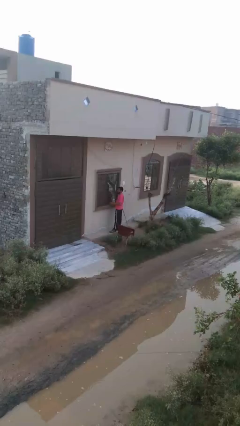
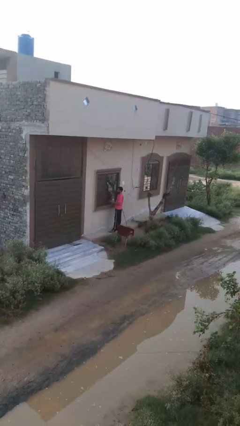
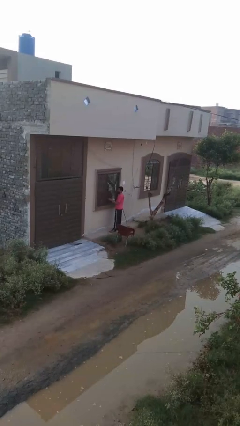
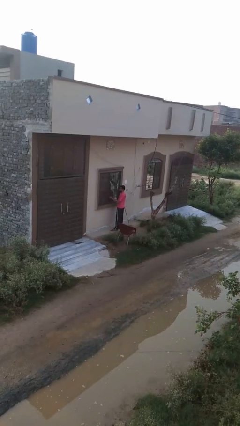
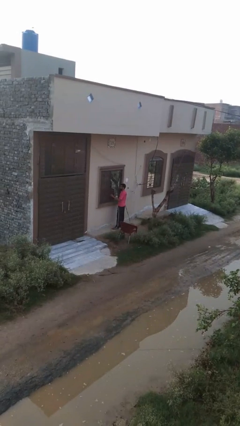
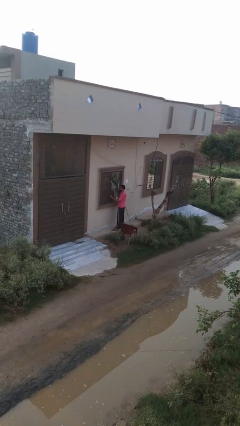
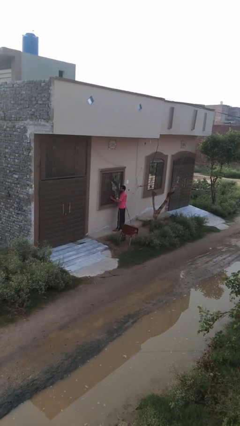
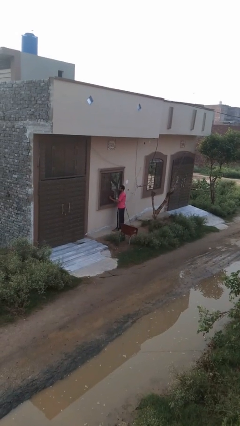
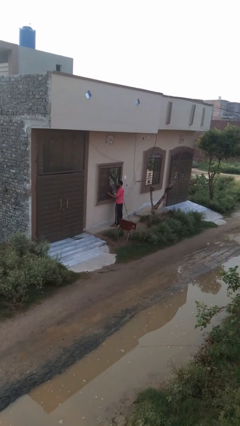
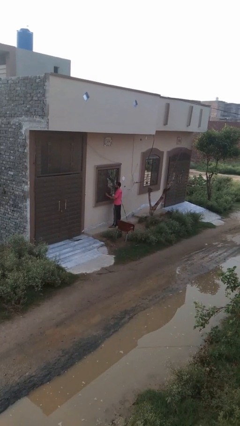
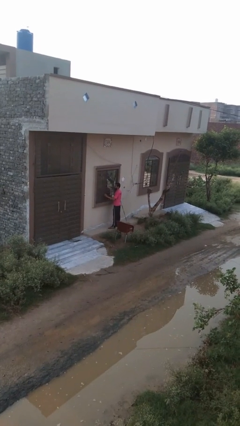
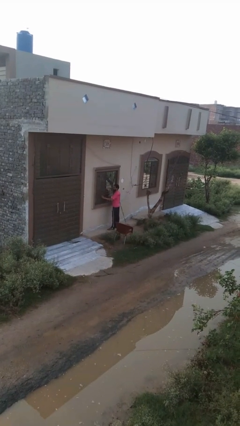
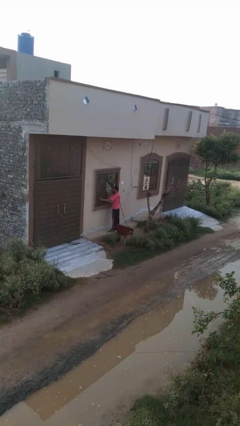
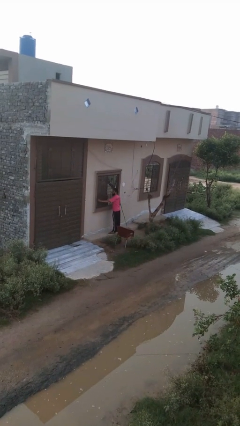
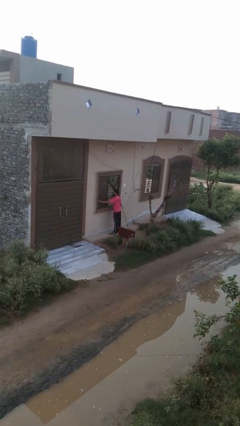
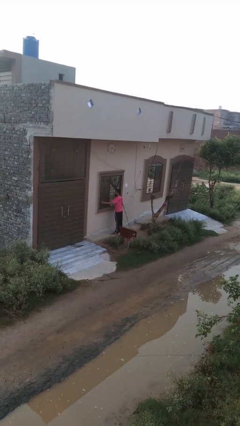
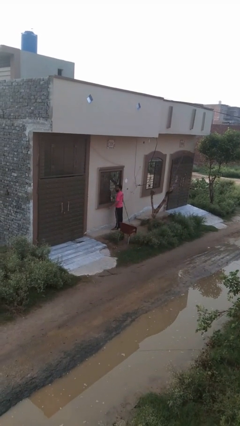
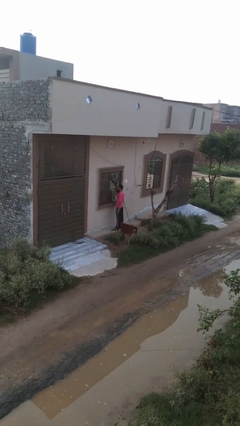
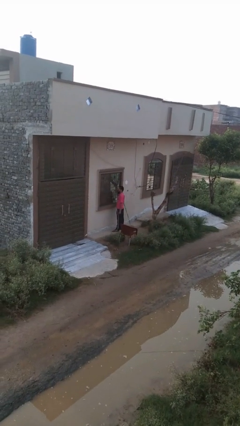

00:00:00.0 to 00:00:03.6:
person opens home window

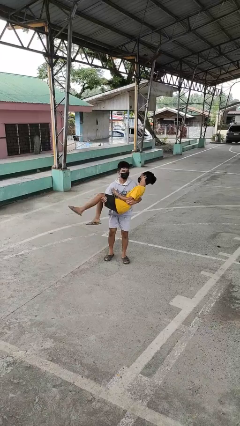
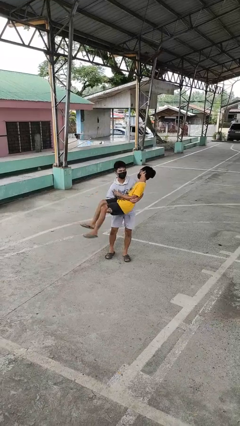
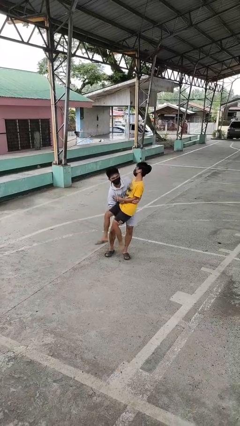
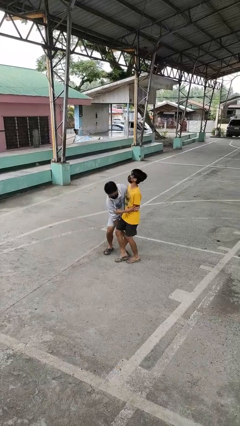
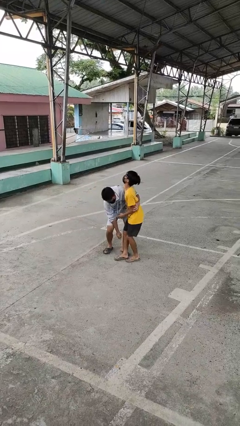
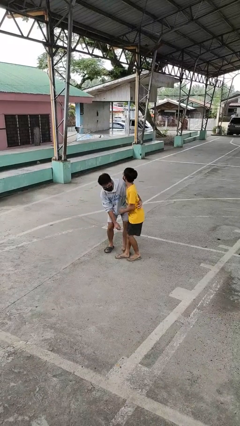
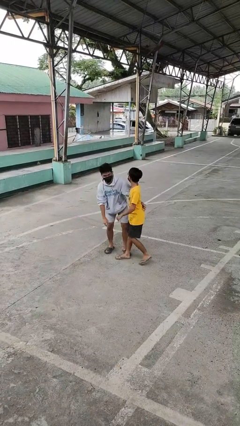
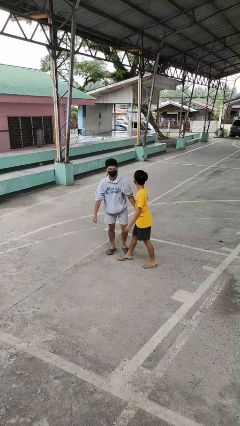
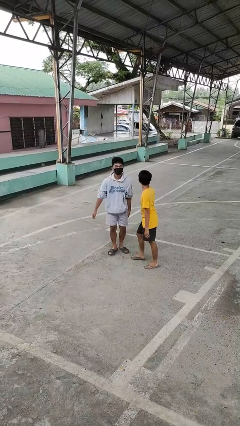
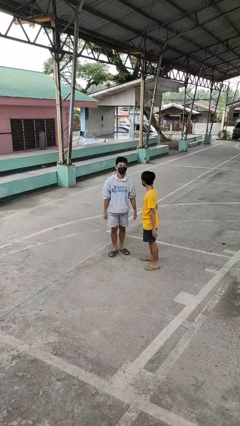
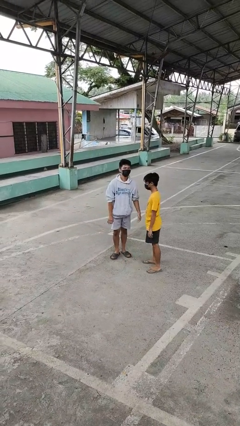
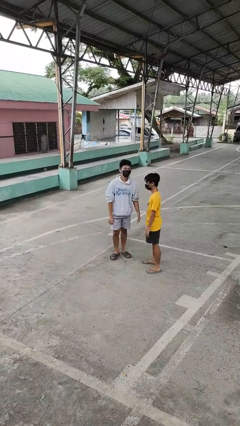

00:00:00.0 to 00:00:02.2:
person puts down person

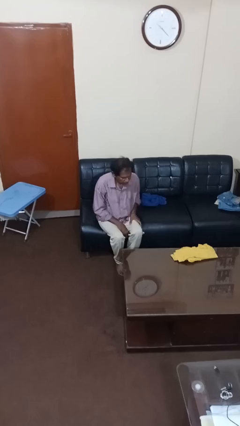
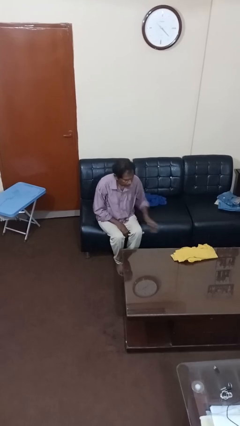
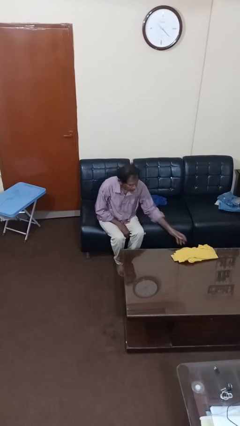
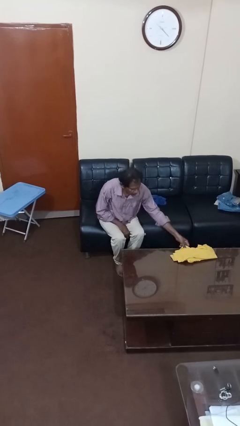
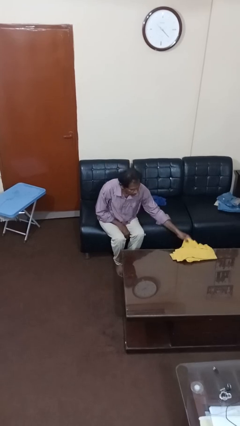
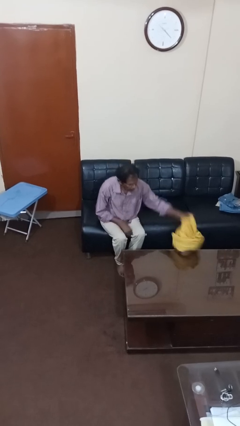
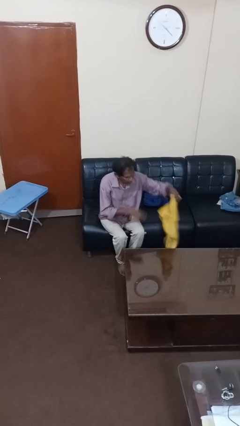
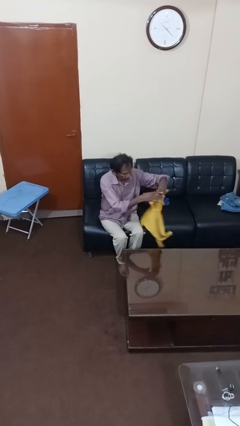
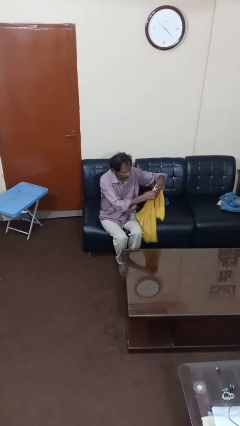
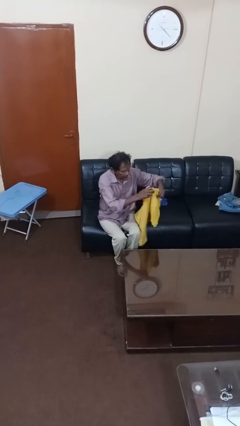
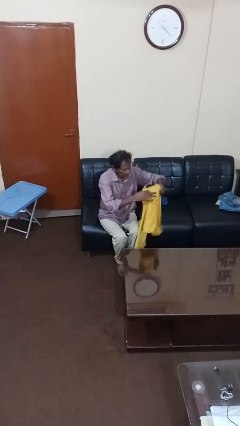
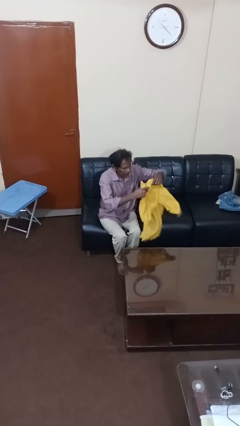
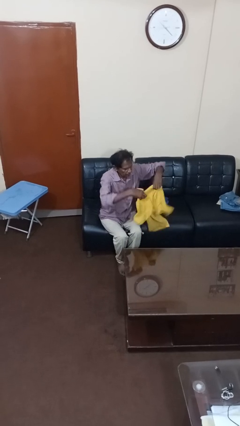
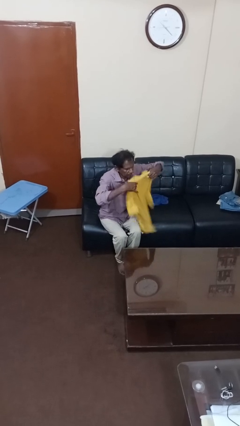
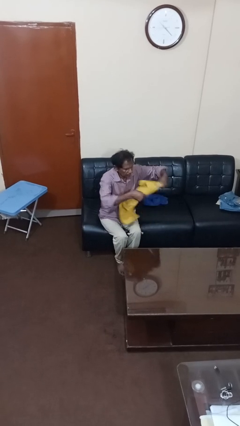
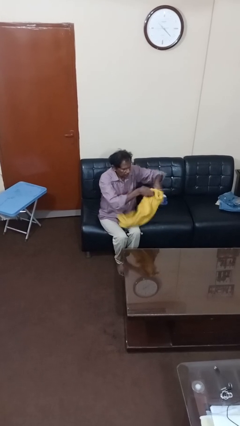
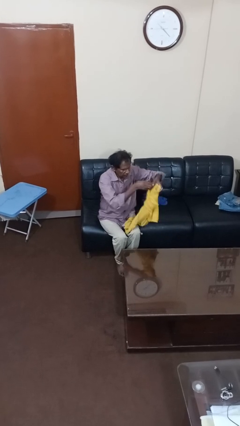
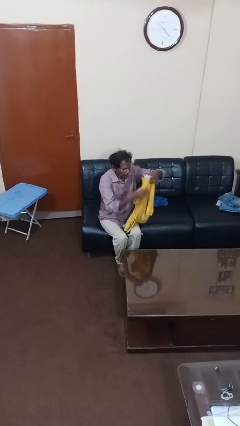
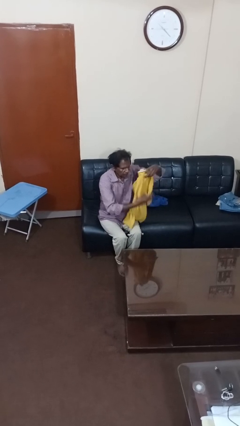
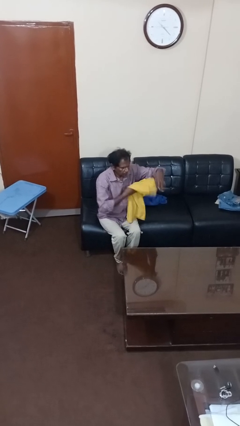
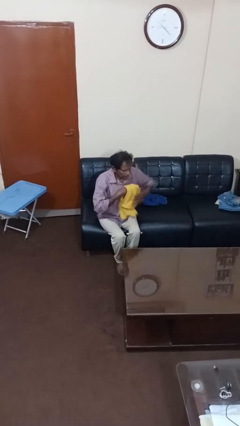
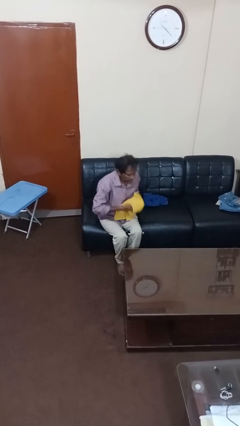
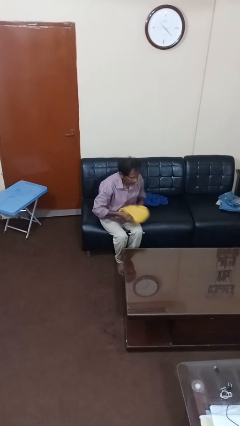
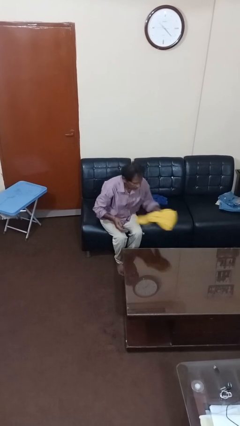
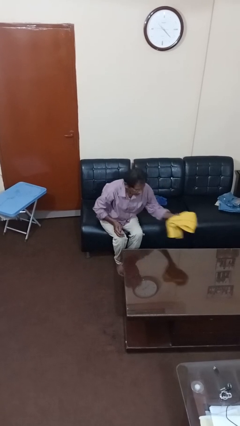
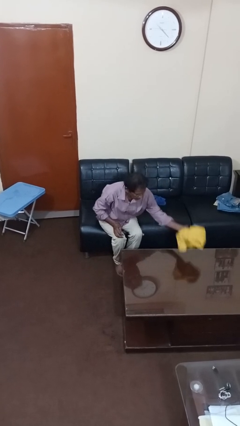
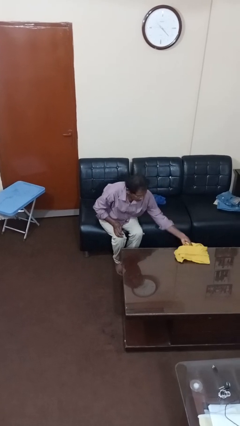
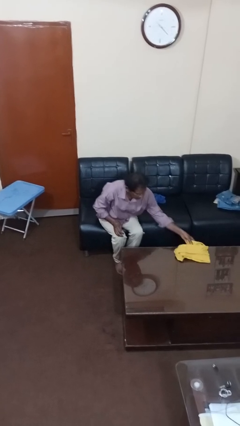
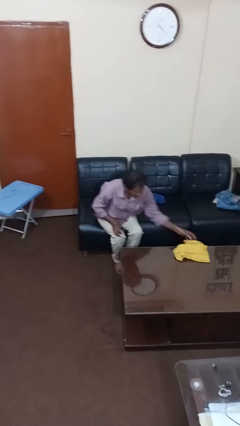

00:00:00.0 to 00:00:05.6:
person folds shirt

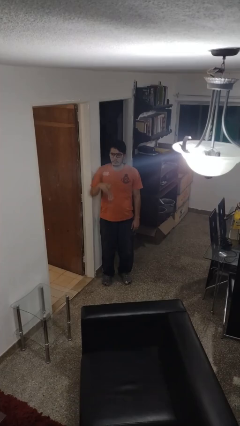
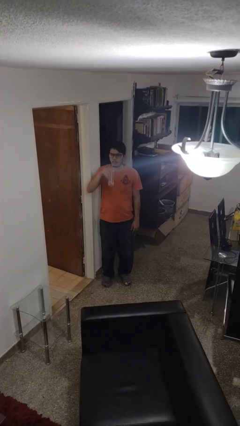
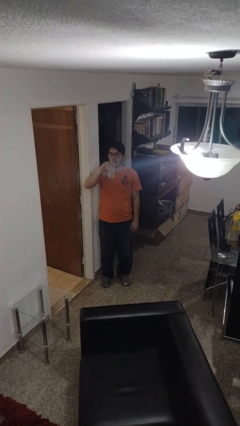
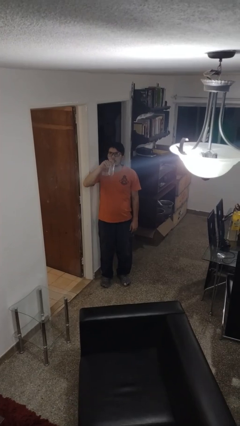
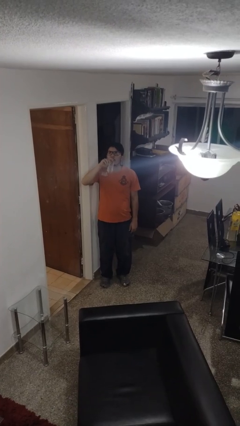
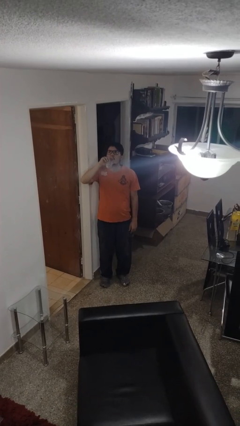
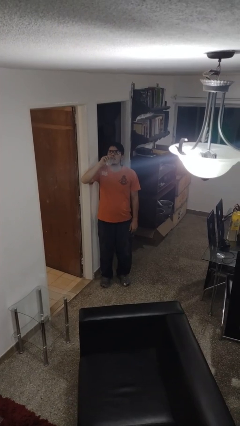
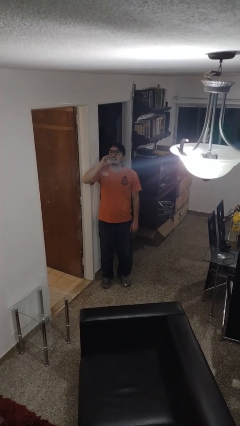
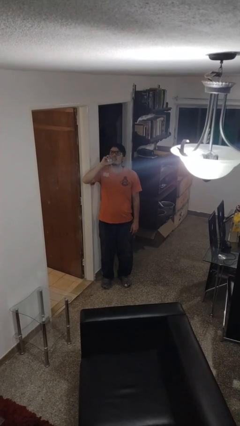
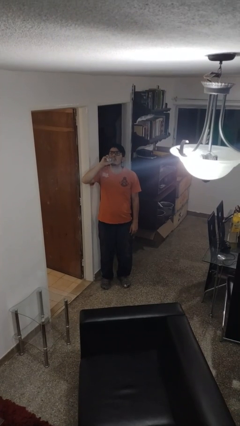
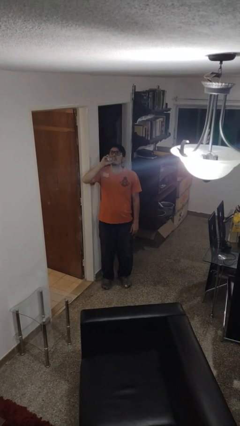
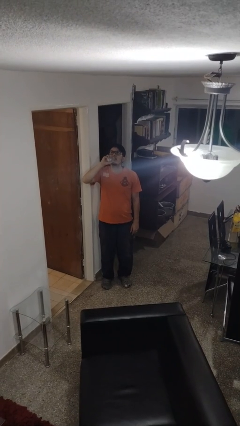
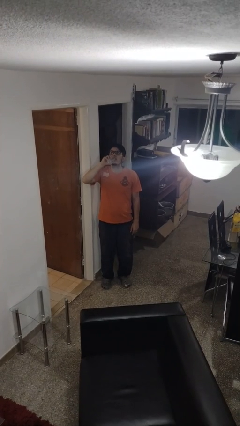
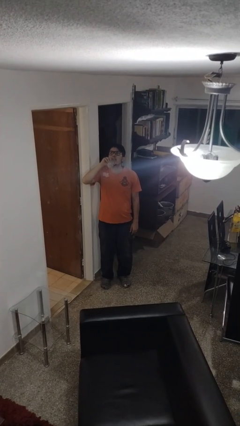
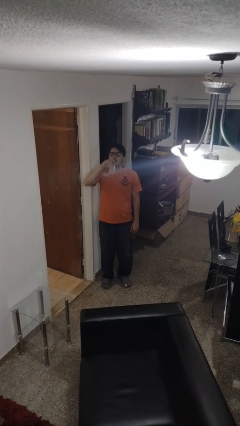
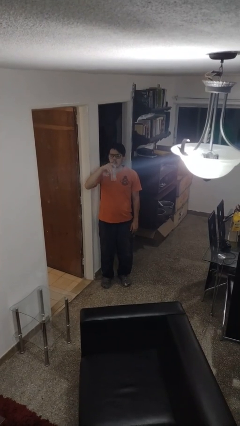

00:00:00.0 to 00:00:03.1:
person drinks from bottle

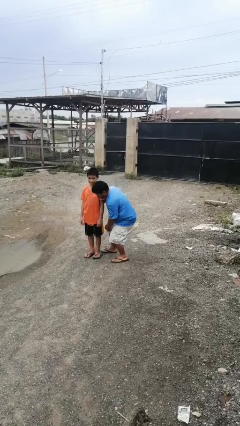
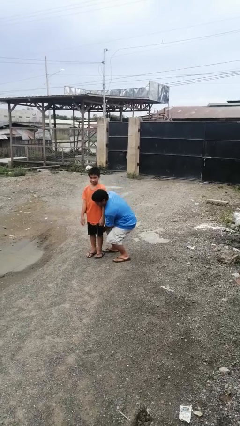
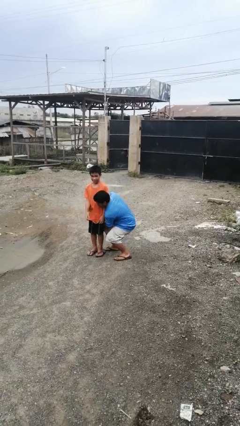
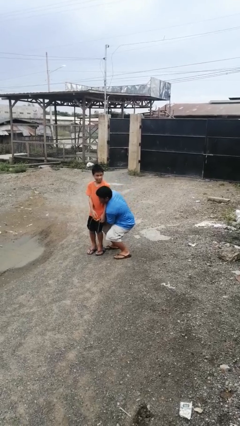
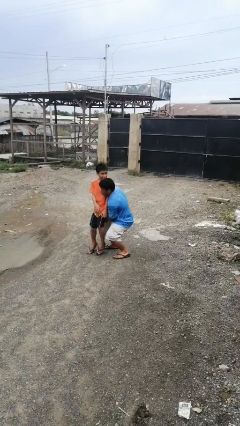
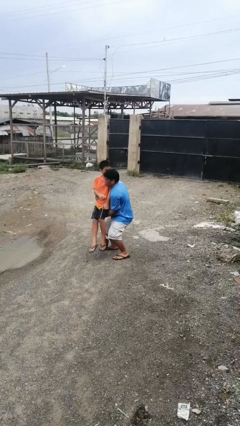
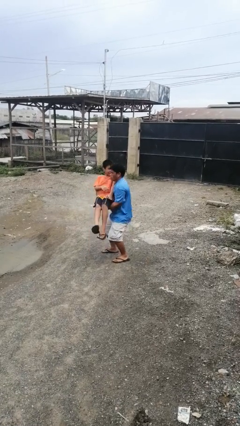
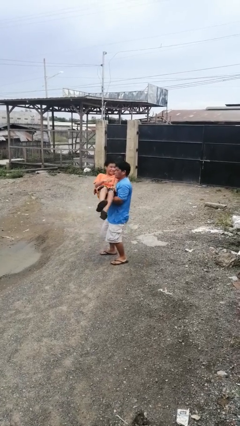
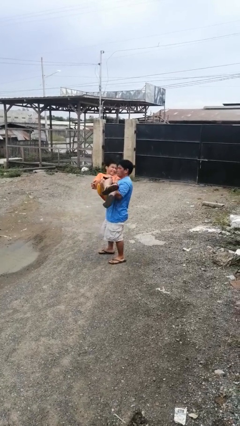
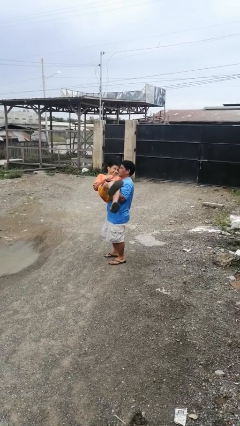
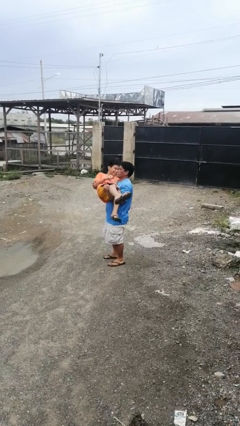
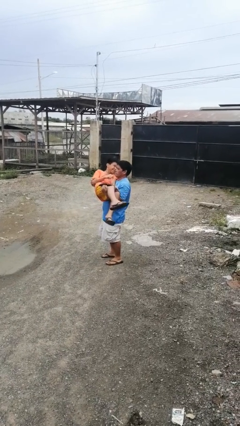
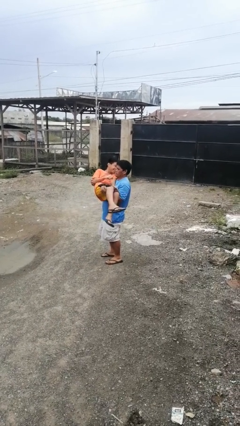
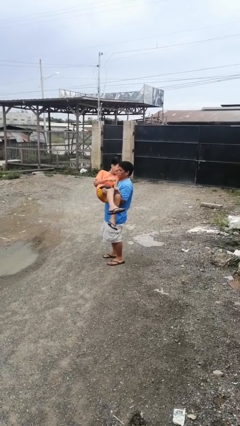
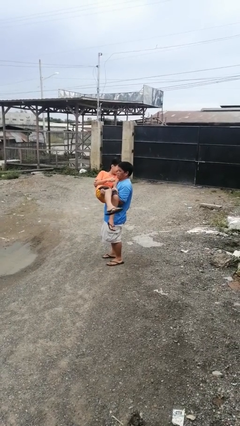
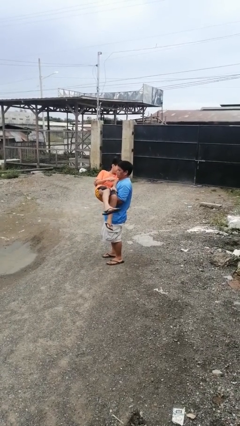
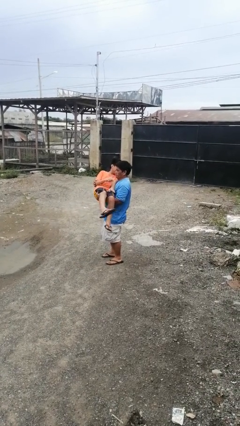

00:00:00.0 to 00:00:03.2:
person picks up person

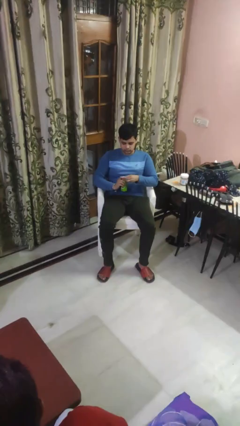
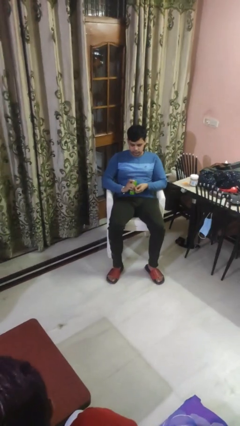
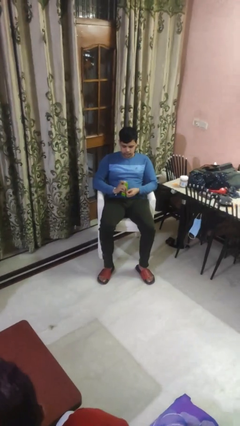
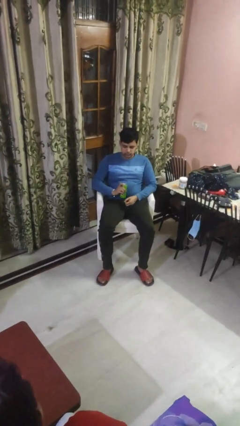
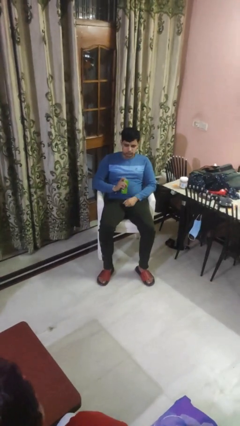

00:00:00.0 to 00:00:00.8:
person opens beverage can
